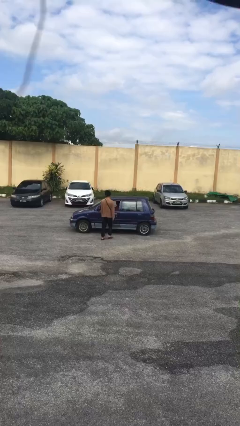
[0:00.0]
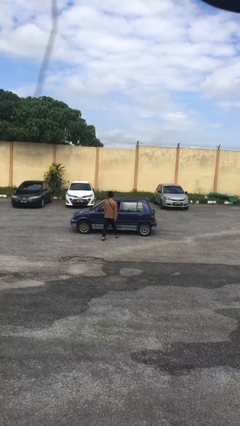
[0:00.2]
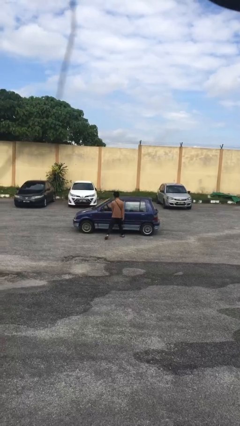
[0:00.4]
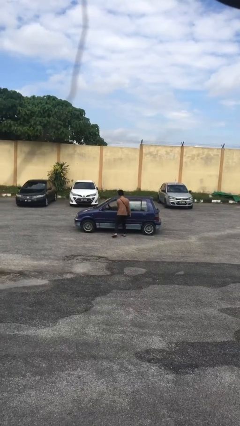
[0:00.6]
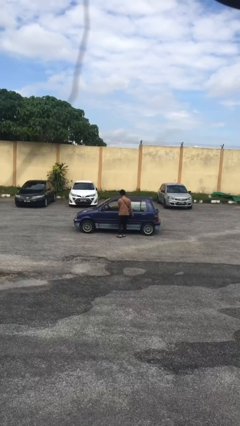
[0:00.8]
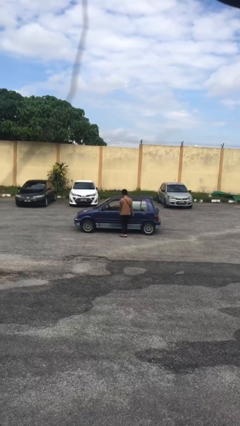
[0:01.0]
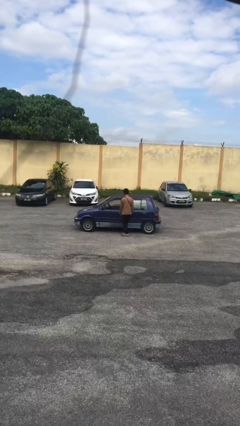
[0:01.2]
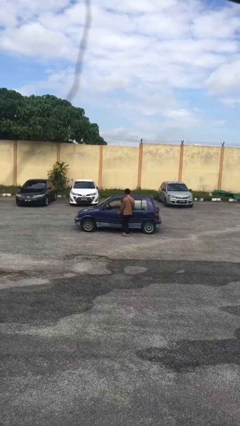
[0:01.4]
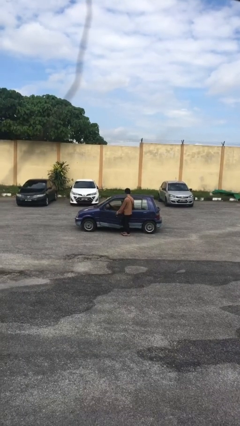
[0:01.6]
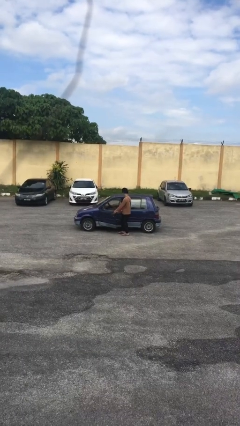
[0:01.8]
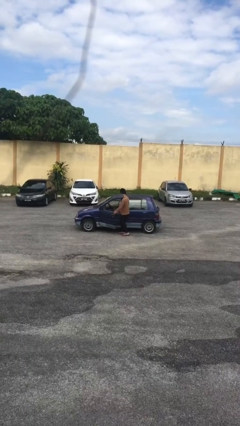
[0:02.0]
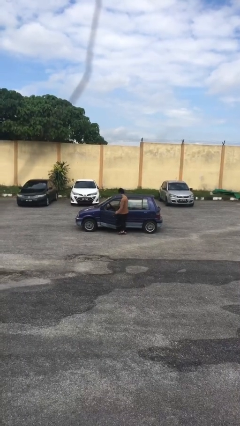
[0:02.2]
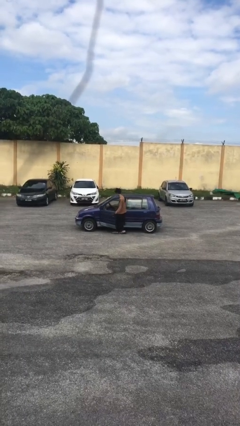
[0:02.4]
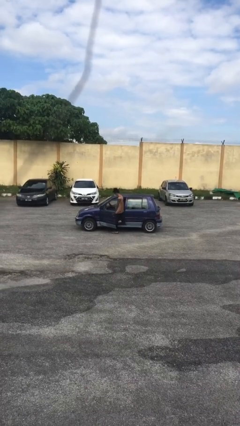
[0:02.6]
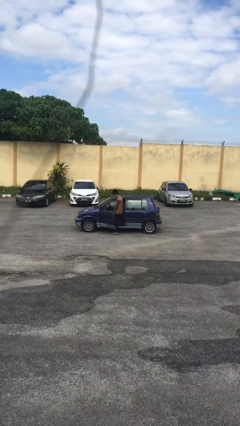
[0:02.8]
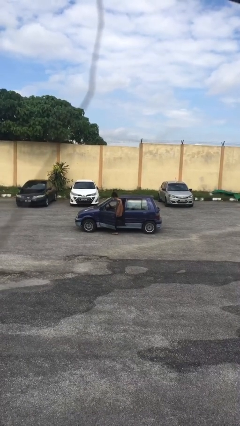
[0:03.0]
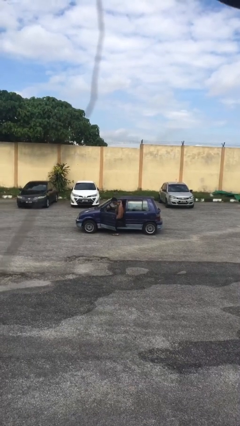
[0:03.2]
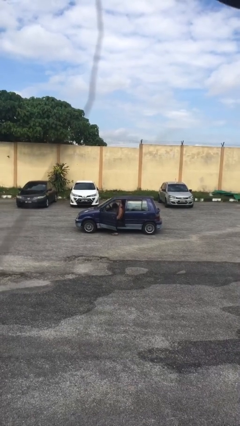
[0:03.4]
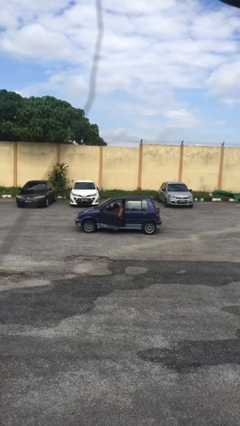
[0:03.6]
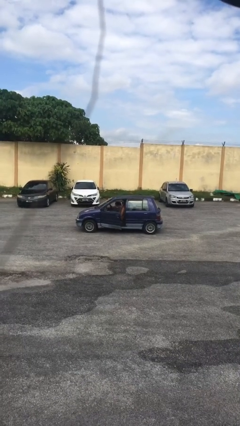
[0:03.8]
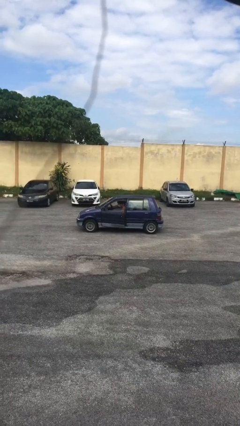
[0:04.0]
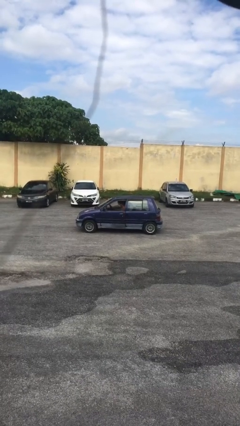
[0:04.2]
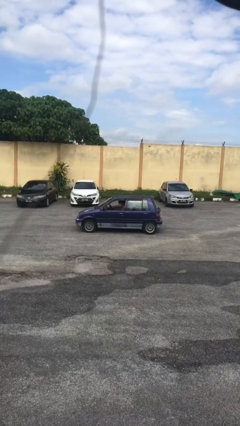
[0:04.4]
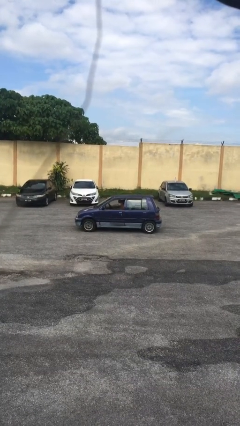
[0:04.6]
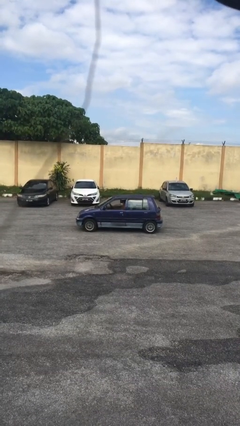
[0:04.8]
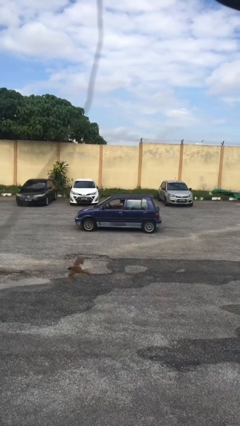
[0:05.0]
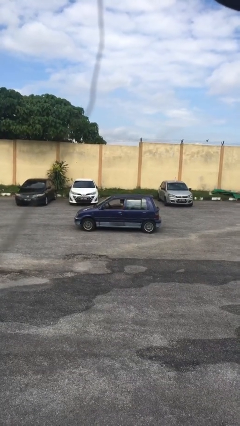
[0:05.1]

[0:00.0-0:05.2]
car picks up person

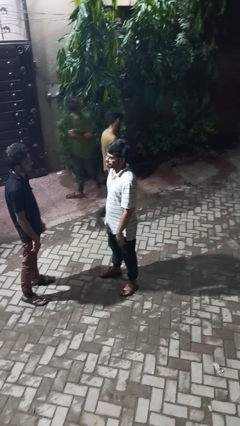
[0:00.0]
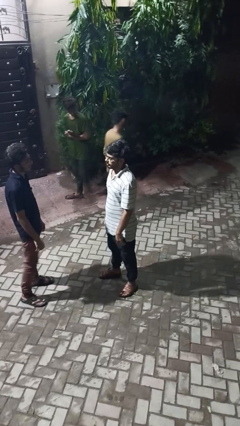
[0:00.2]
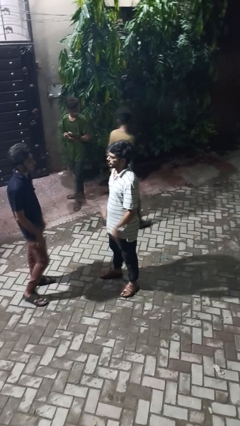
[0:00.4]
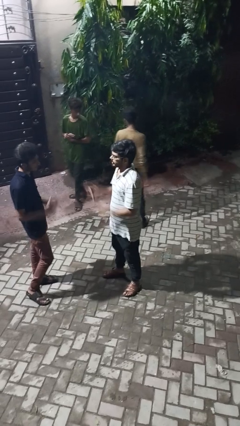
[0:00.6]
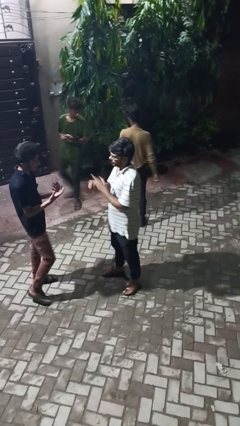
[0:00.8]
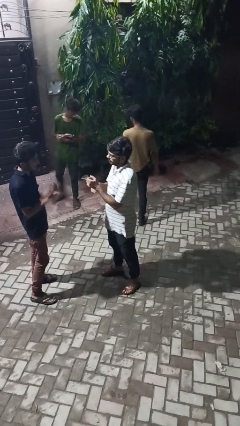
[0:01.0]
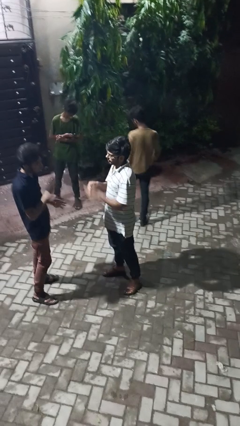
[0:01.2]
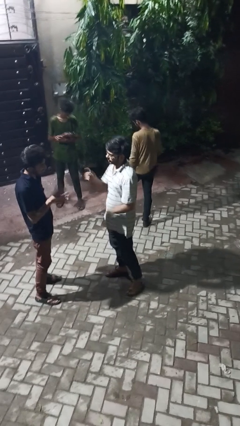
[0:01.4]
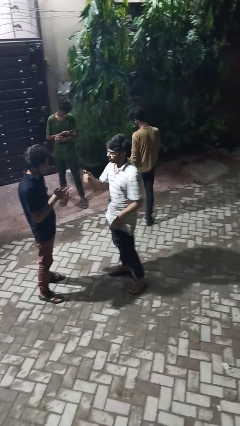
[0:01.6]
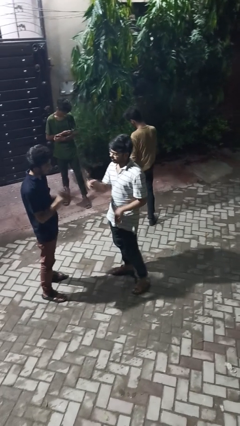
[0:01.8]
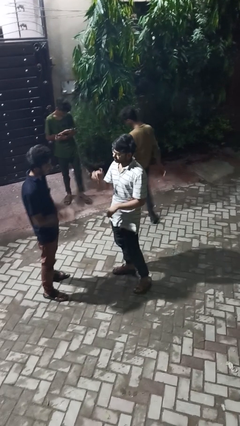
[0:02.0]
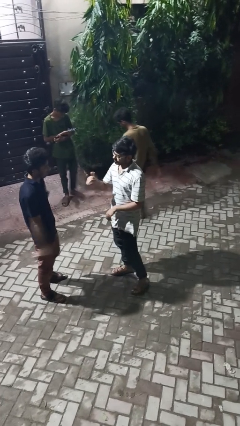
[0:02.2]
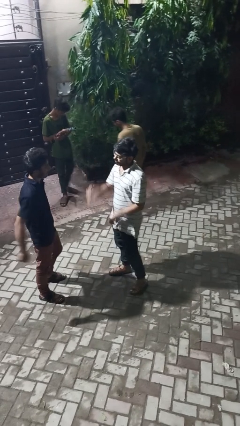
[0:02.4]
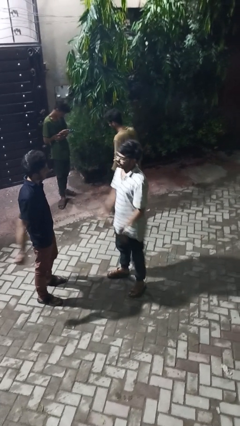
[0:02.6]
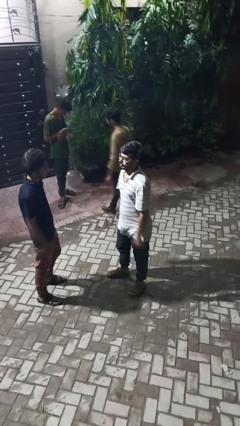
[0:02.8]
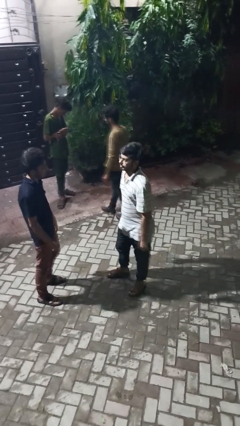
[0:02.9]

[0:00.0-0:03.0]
person talks to person

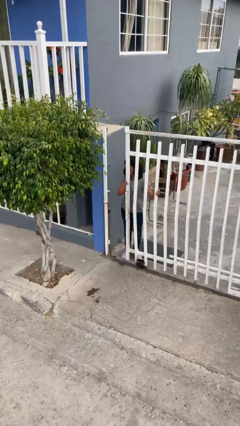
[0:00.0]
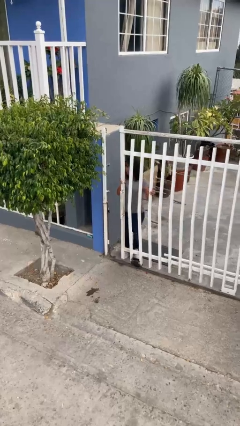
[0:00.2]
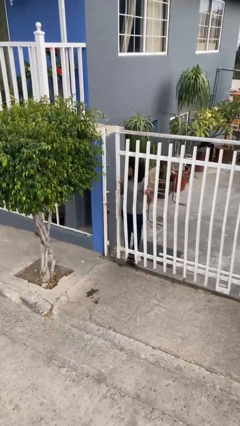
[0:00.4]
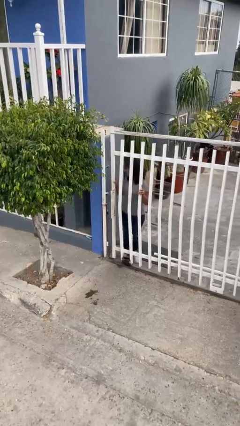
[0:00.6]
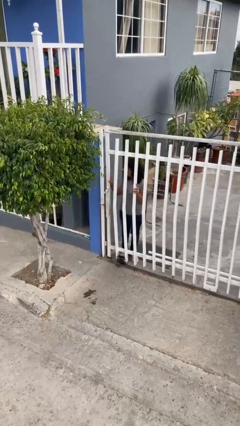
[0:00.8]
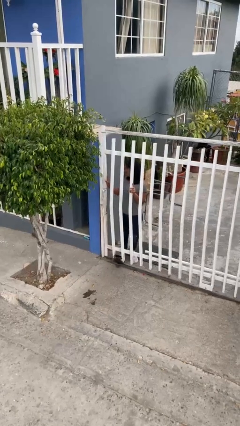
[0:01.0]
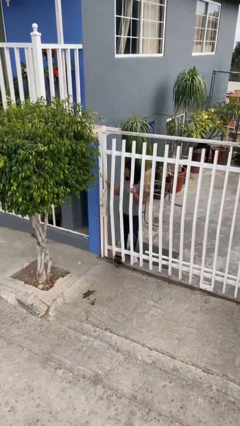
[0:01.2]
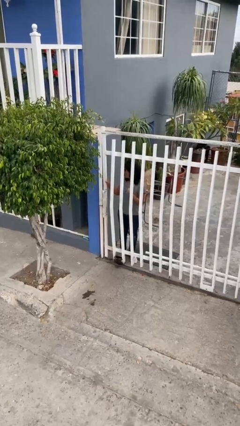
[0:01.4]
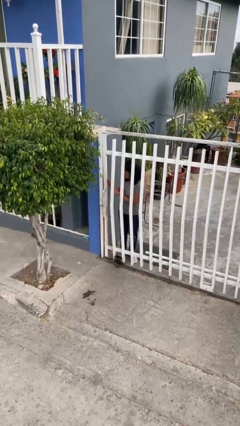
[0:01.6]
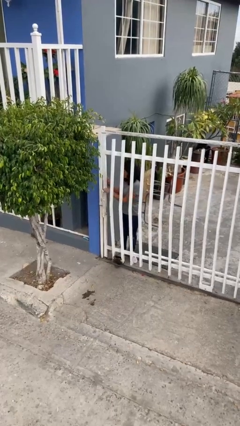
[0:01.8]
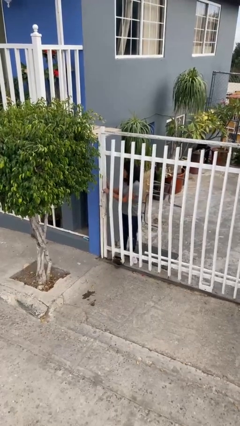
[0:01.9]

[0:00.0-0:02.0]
person closes facility door

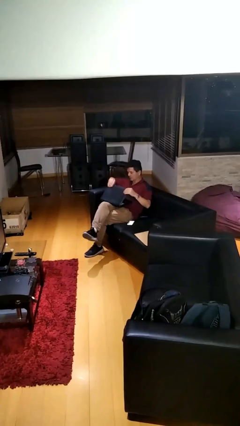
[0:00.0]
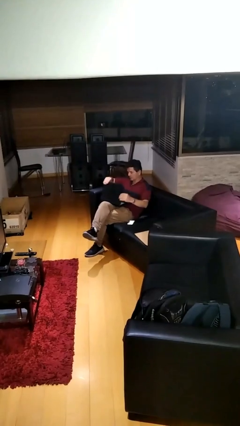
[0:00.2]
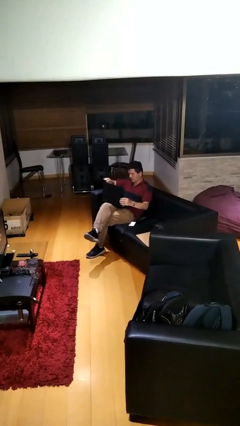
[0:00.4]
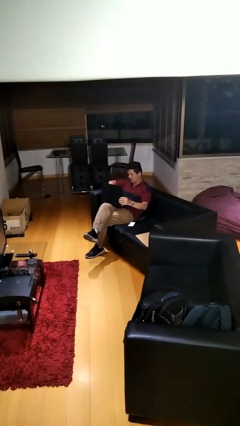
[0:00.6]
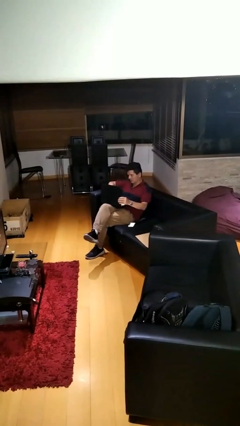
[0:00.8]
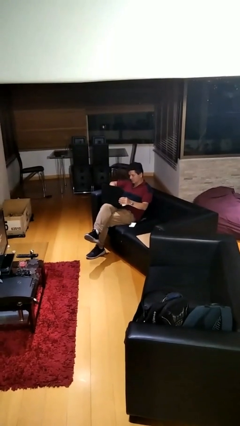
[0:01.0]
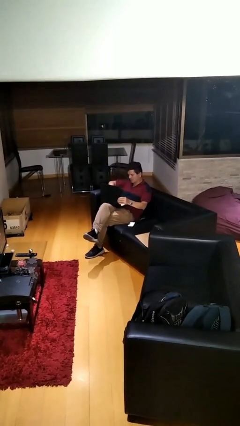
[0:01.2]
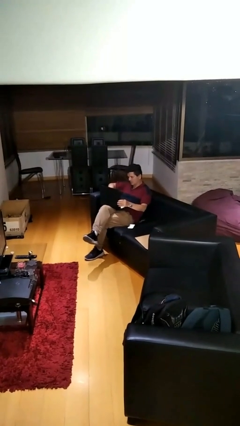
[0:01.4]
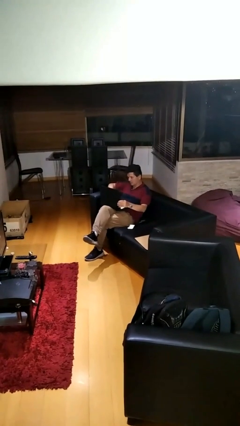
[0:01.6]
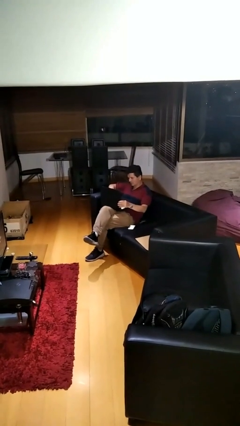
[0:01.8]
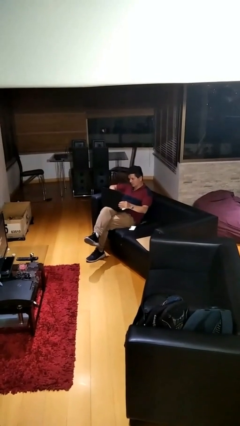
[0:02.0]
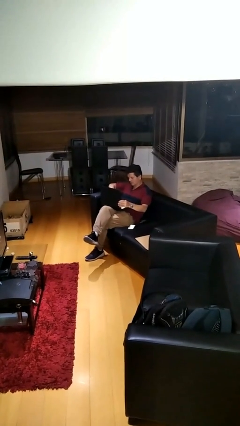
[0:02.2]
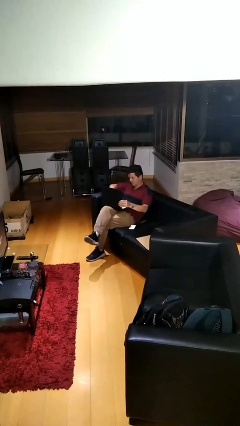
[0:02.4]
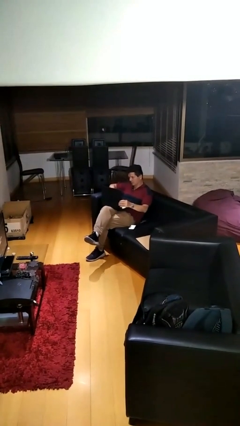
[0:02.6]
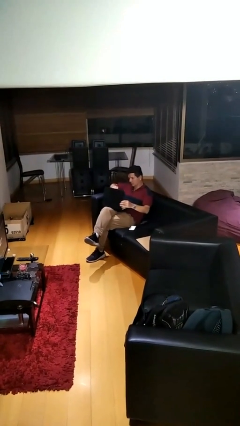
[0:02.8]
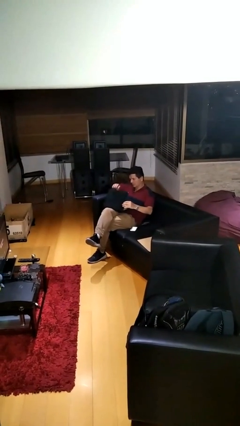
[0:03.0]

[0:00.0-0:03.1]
person interacts with laptop

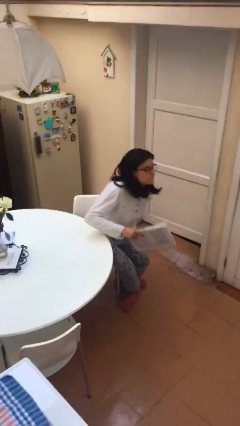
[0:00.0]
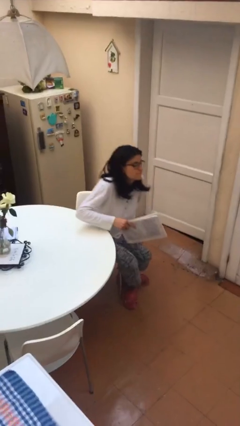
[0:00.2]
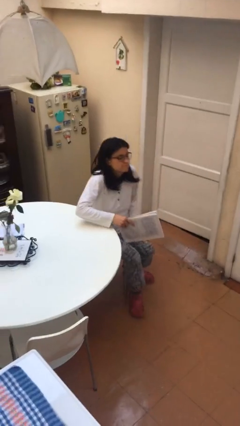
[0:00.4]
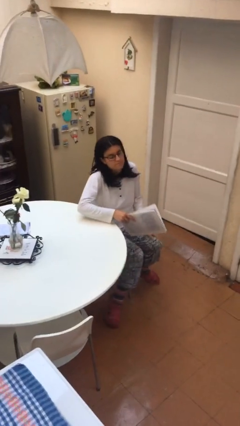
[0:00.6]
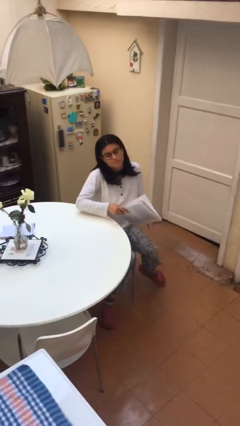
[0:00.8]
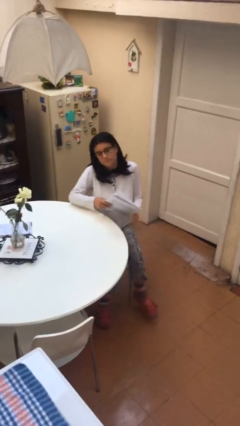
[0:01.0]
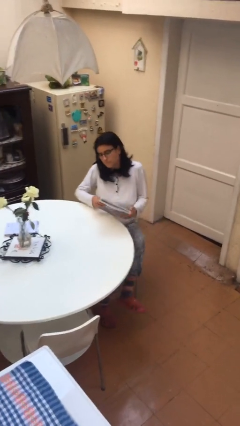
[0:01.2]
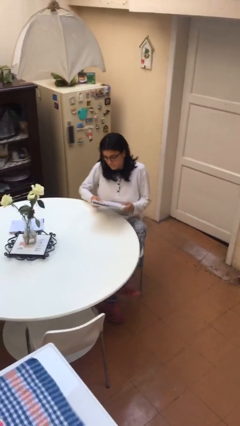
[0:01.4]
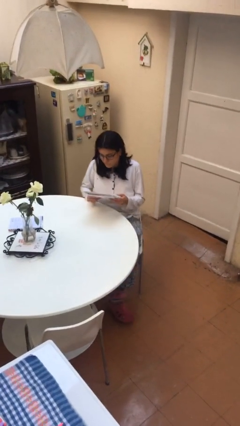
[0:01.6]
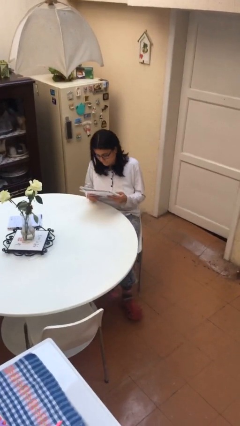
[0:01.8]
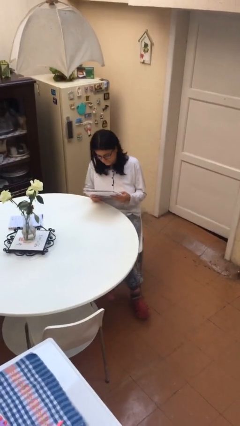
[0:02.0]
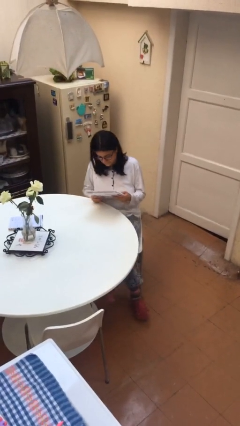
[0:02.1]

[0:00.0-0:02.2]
person sits down

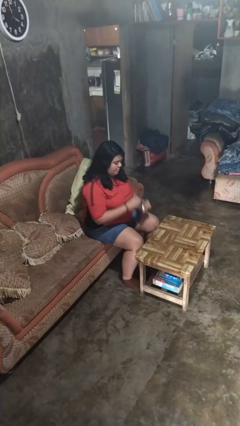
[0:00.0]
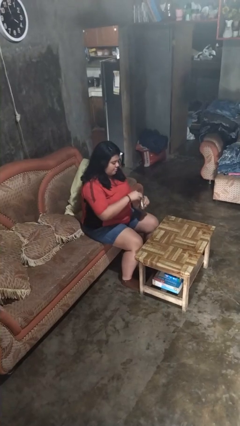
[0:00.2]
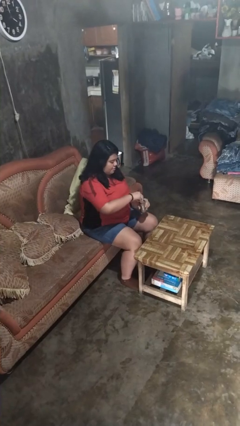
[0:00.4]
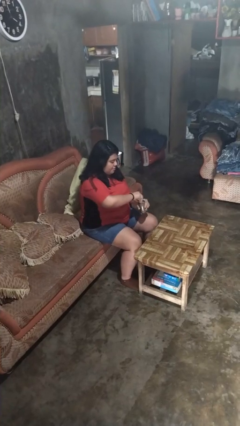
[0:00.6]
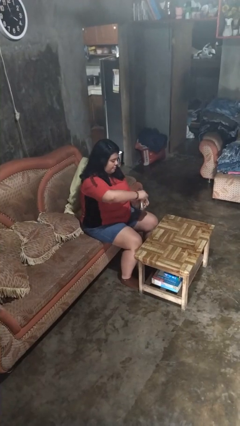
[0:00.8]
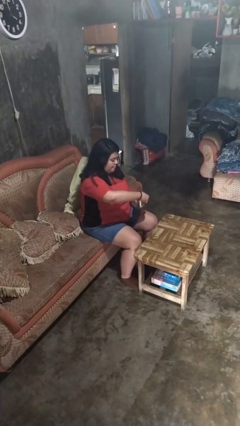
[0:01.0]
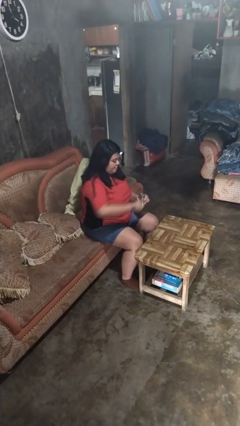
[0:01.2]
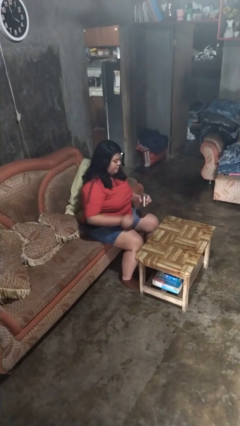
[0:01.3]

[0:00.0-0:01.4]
person opens beverage can
